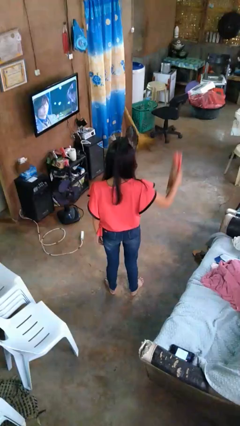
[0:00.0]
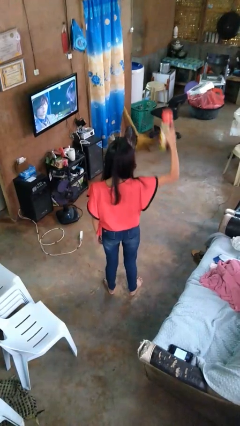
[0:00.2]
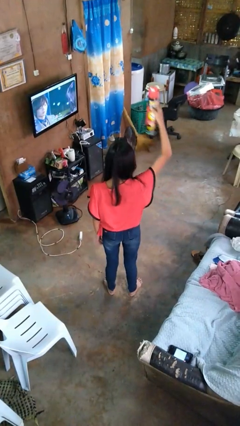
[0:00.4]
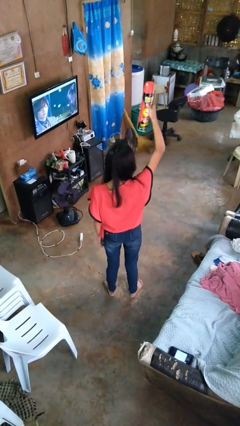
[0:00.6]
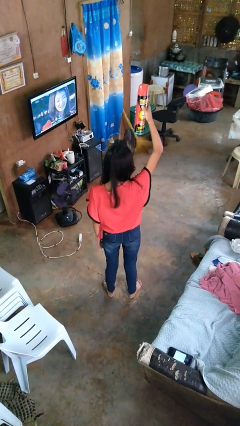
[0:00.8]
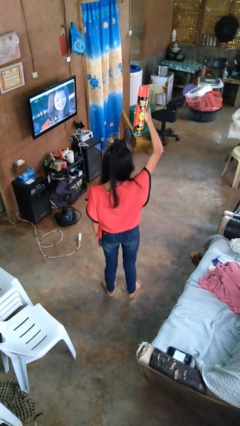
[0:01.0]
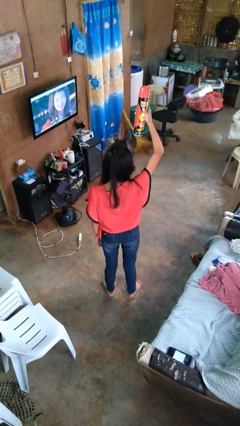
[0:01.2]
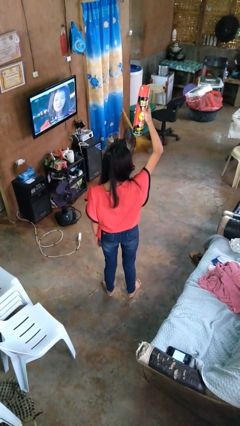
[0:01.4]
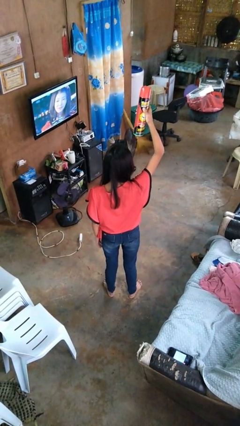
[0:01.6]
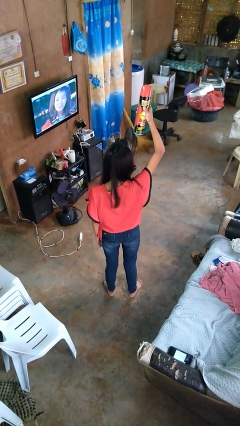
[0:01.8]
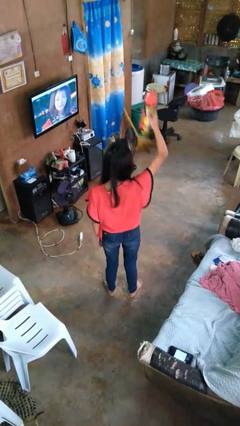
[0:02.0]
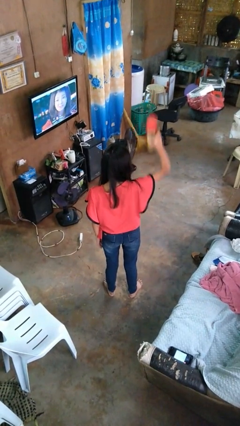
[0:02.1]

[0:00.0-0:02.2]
person holds object above head

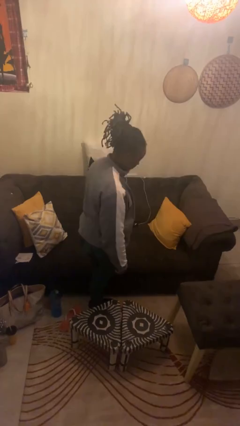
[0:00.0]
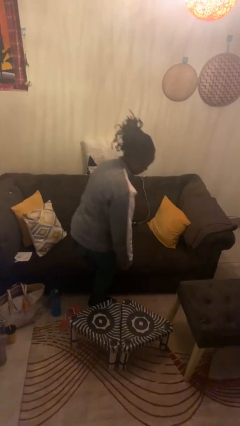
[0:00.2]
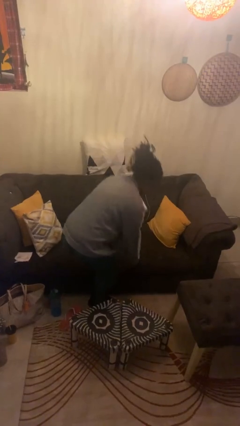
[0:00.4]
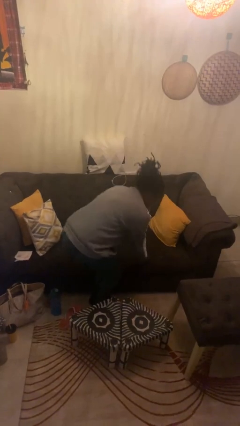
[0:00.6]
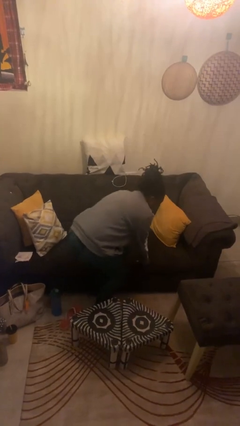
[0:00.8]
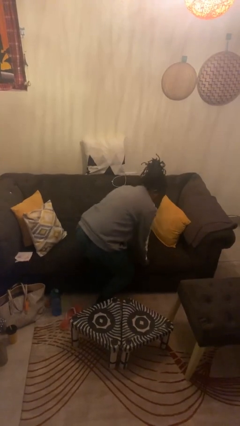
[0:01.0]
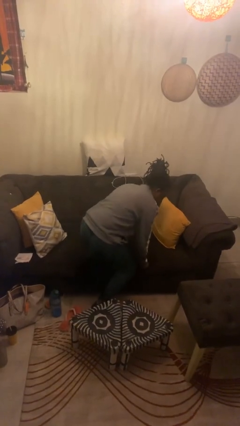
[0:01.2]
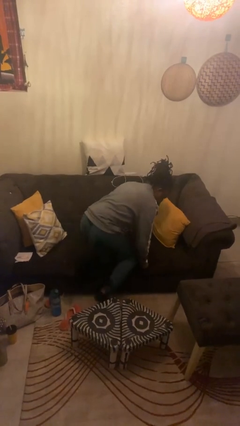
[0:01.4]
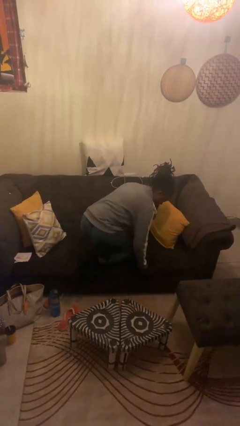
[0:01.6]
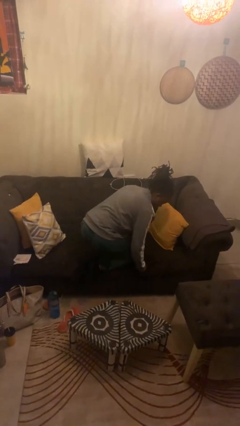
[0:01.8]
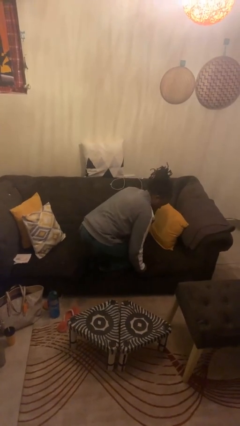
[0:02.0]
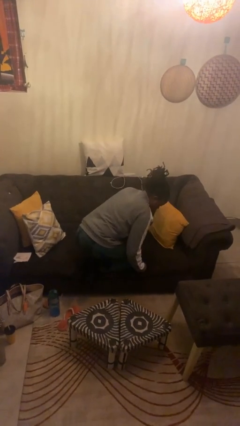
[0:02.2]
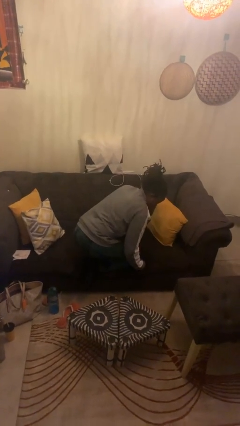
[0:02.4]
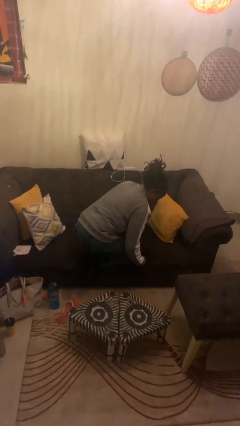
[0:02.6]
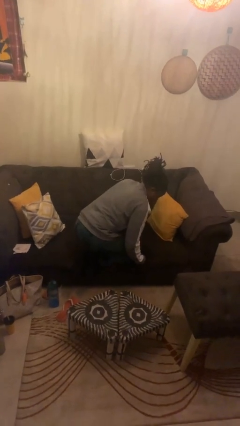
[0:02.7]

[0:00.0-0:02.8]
person climbs on couch

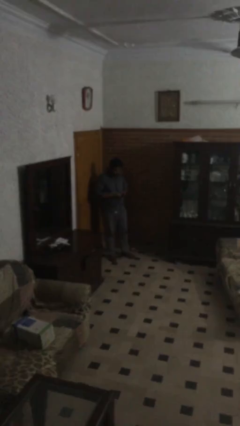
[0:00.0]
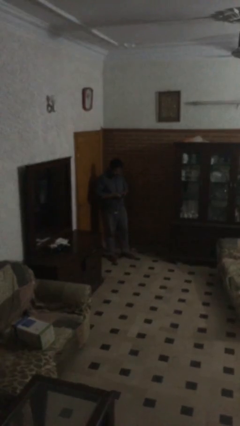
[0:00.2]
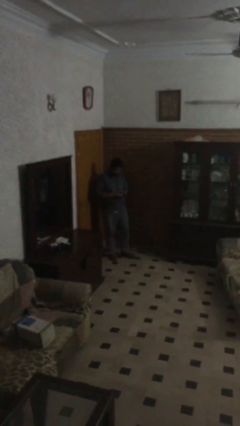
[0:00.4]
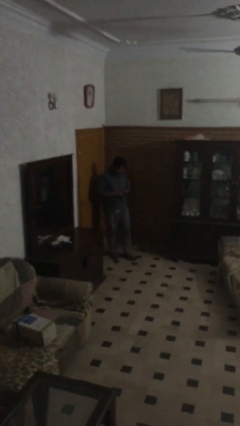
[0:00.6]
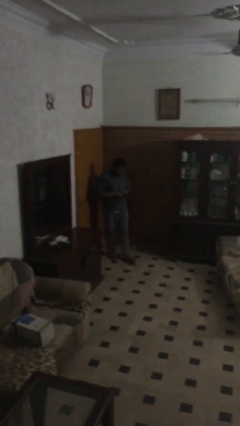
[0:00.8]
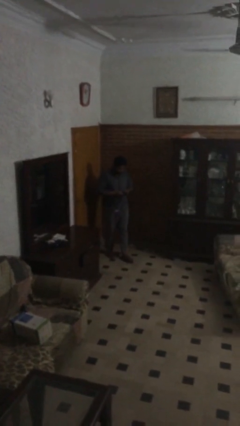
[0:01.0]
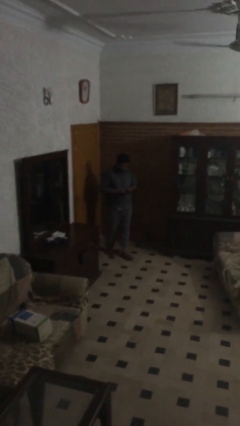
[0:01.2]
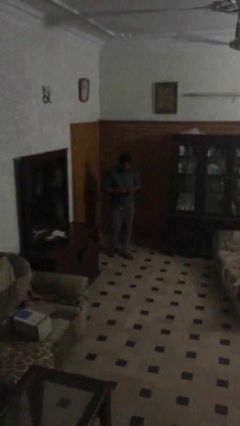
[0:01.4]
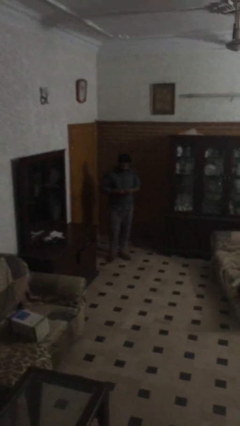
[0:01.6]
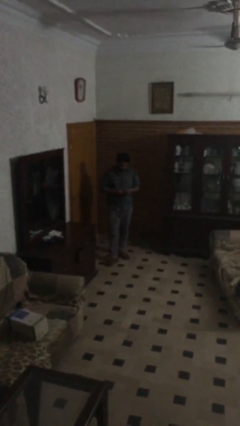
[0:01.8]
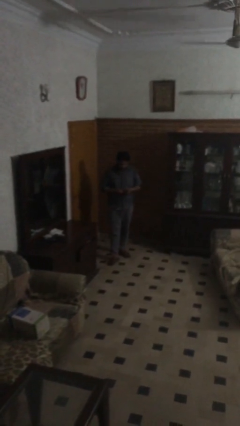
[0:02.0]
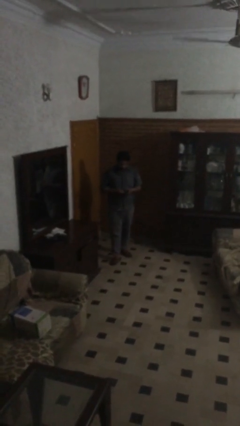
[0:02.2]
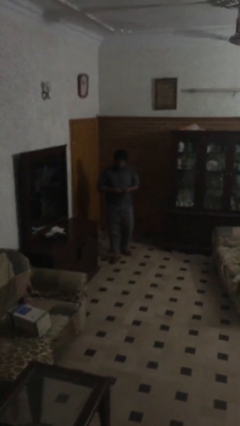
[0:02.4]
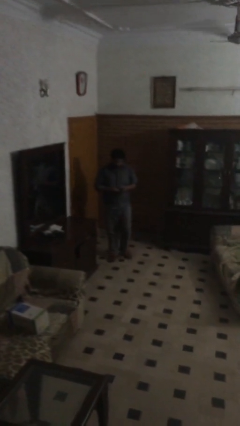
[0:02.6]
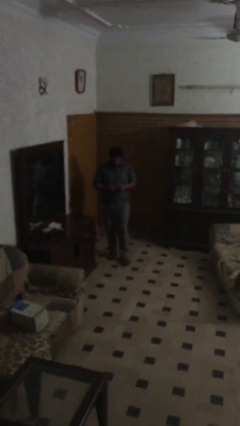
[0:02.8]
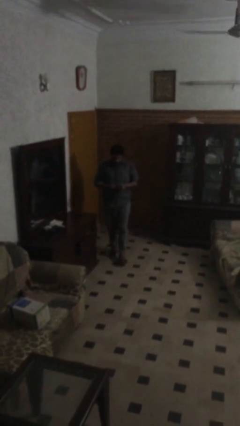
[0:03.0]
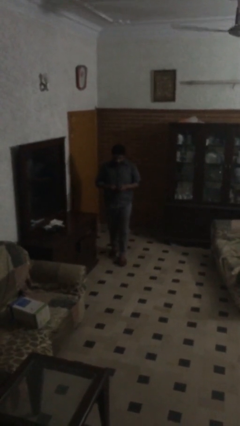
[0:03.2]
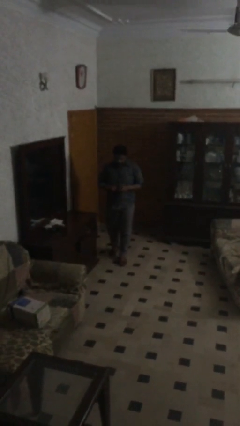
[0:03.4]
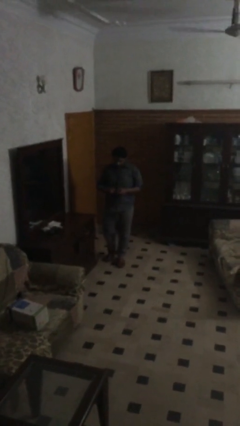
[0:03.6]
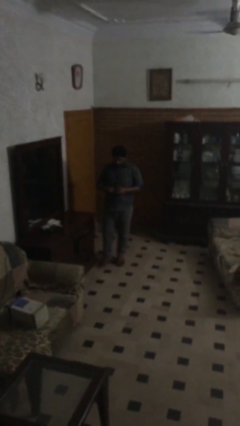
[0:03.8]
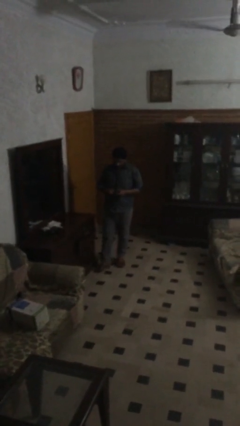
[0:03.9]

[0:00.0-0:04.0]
person texts on phone

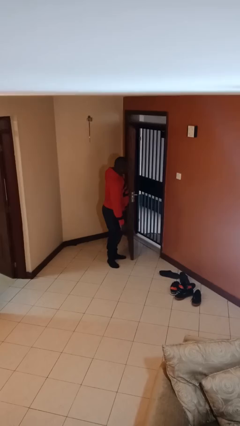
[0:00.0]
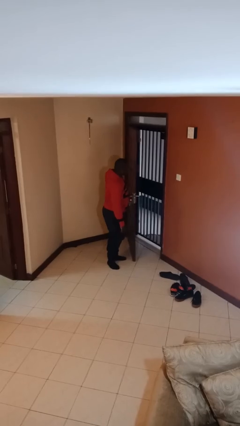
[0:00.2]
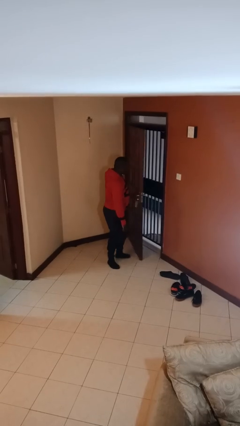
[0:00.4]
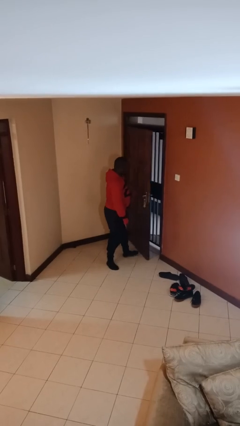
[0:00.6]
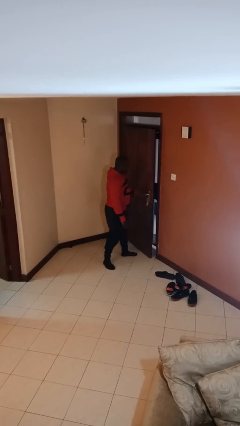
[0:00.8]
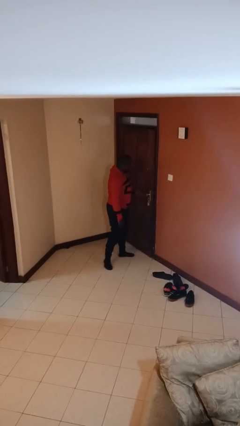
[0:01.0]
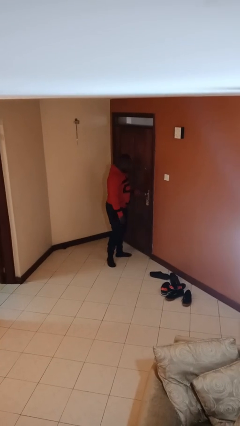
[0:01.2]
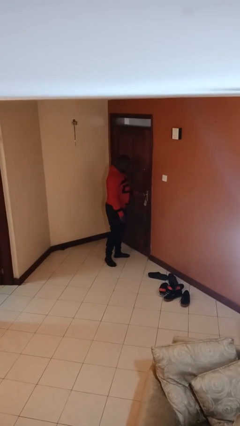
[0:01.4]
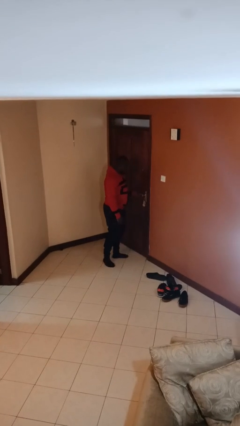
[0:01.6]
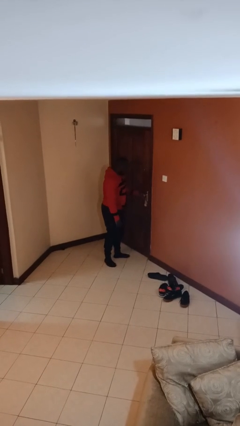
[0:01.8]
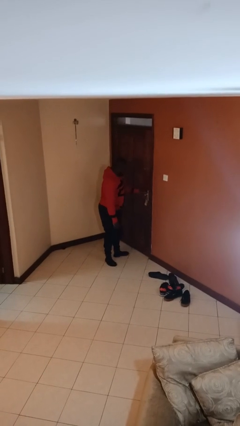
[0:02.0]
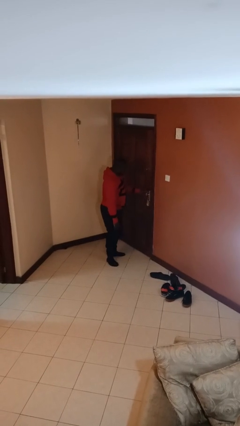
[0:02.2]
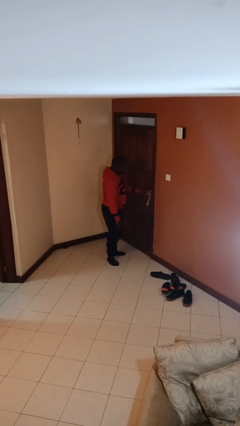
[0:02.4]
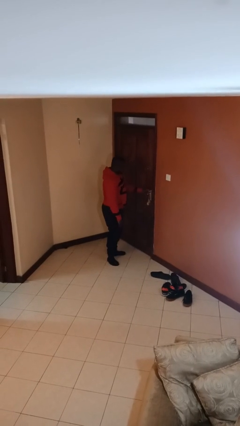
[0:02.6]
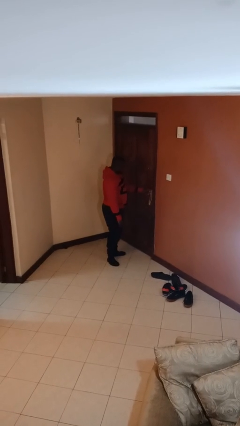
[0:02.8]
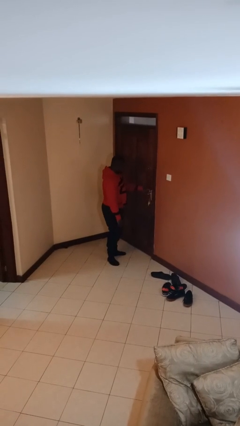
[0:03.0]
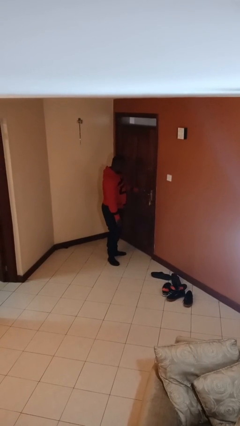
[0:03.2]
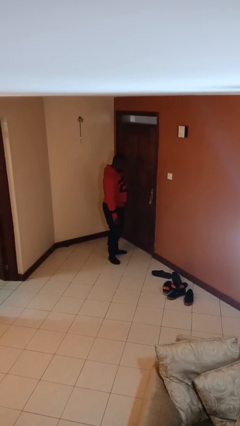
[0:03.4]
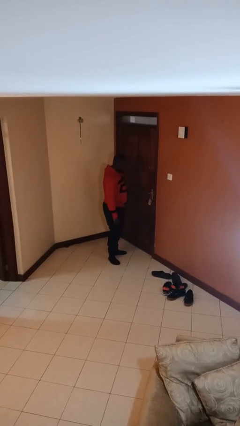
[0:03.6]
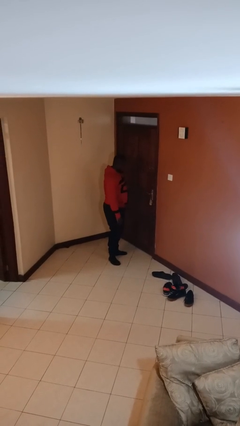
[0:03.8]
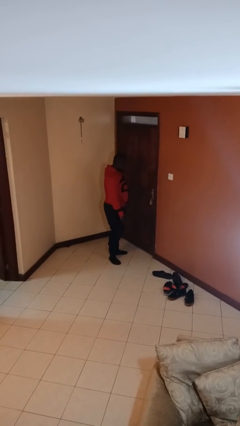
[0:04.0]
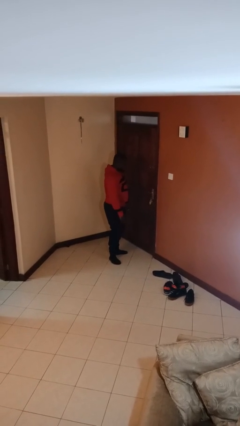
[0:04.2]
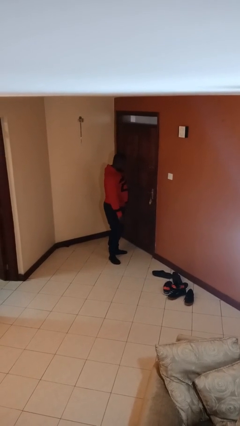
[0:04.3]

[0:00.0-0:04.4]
person closes facility door

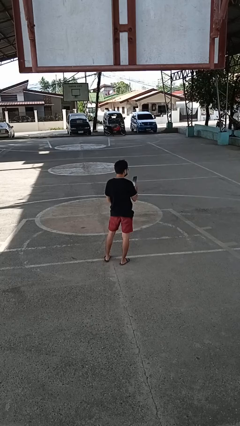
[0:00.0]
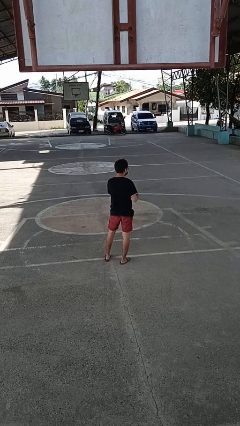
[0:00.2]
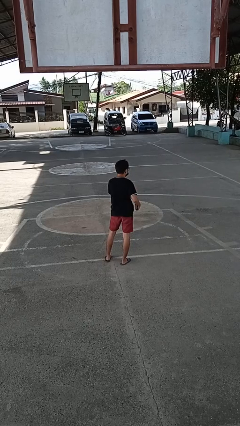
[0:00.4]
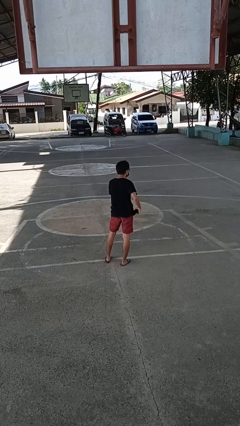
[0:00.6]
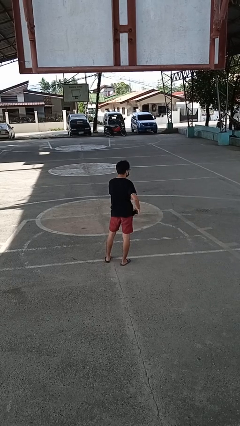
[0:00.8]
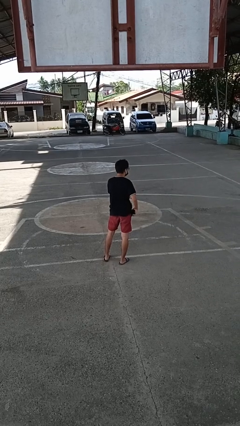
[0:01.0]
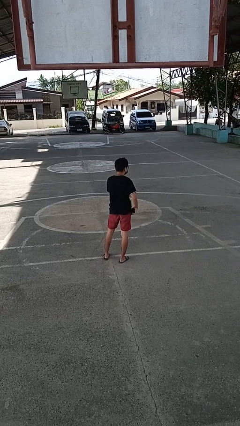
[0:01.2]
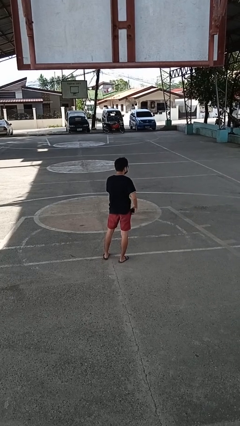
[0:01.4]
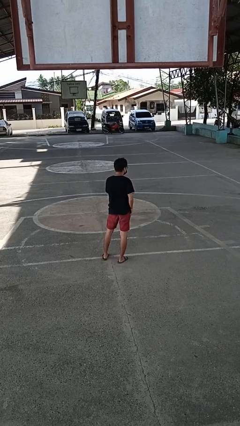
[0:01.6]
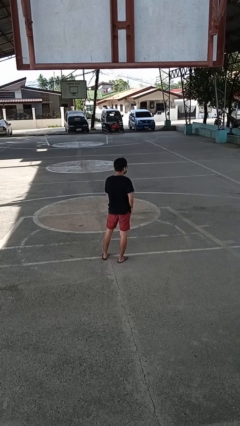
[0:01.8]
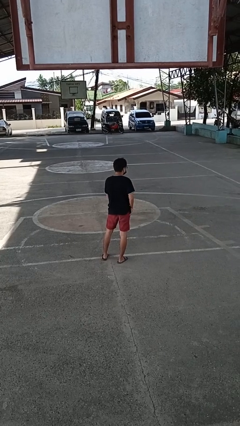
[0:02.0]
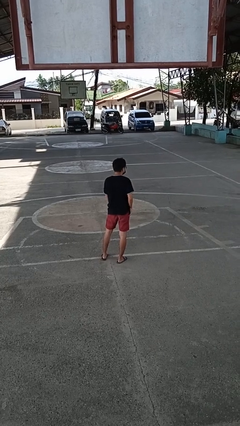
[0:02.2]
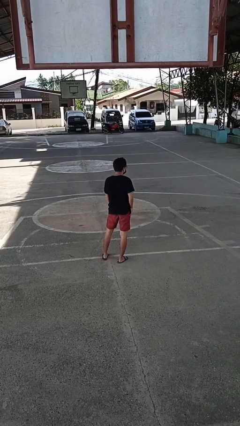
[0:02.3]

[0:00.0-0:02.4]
person puts phone into pocket

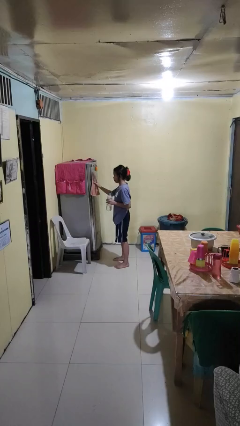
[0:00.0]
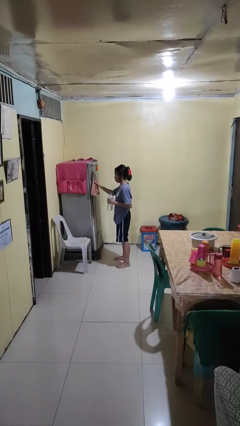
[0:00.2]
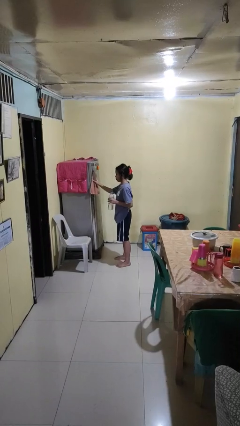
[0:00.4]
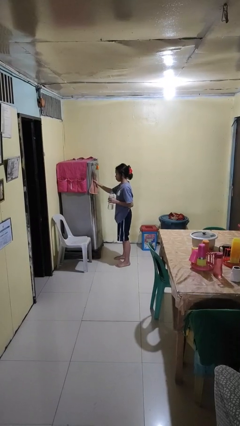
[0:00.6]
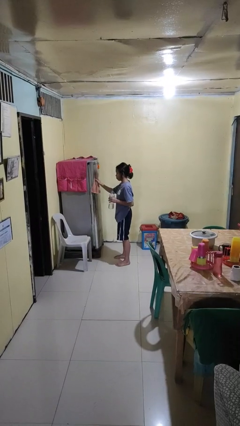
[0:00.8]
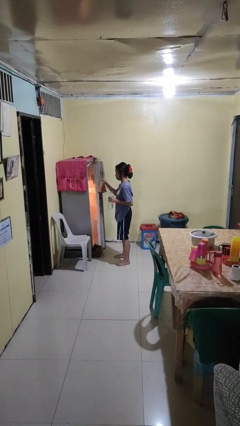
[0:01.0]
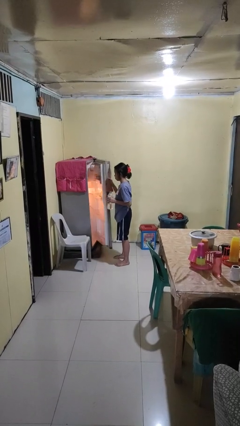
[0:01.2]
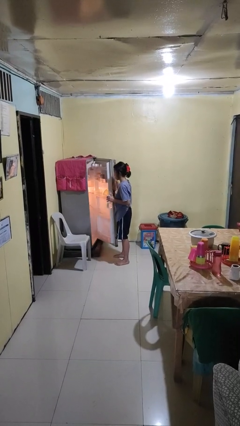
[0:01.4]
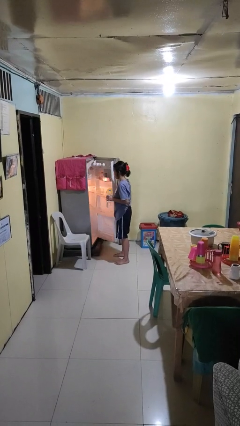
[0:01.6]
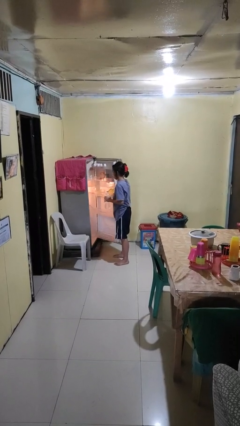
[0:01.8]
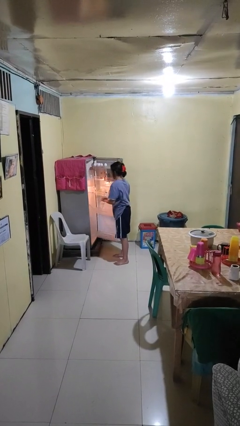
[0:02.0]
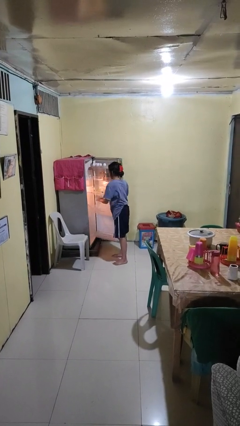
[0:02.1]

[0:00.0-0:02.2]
person opens refrigerator
